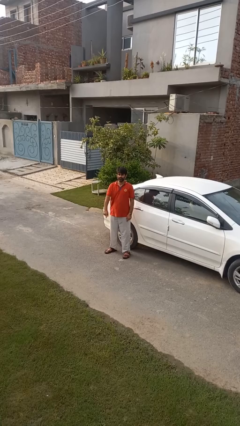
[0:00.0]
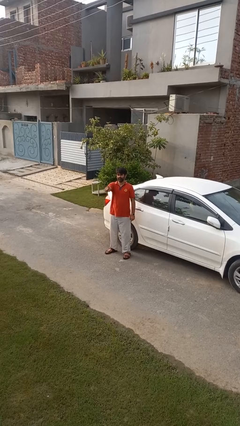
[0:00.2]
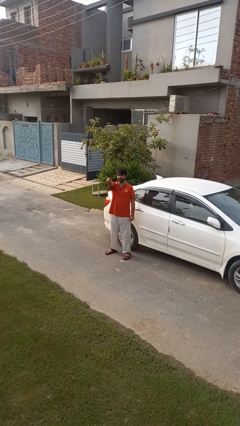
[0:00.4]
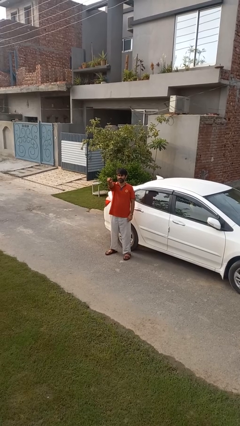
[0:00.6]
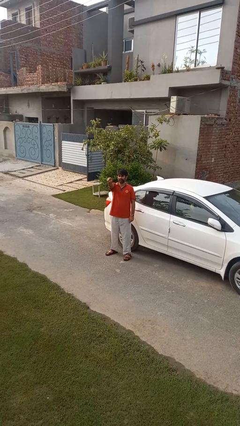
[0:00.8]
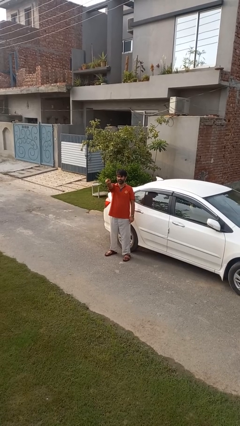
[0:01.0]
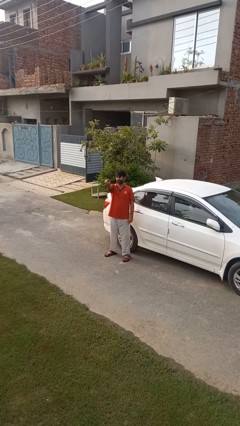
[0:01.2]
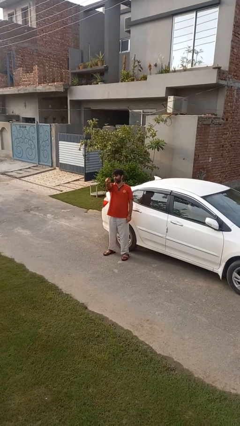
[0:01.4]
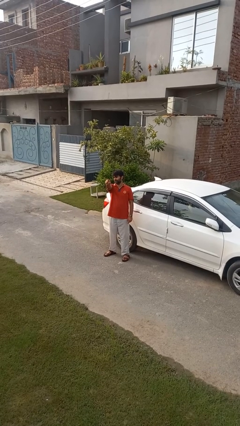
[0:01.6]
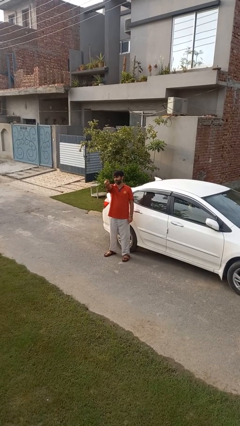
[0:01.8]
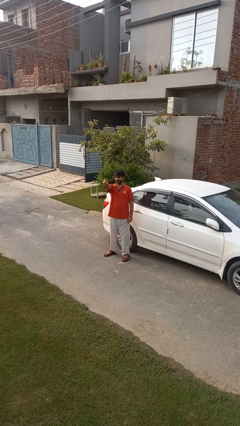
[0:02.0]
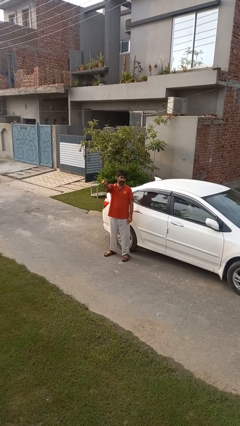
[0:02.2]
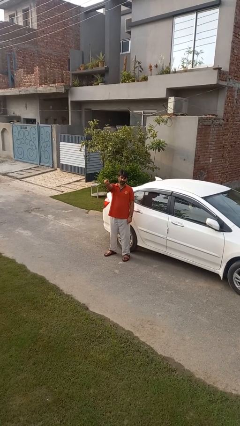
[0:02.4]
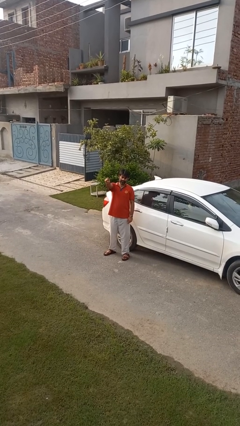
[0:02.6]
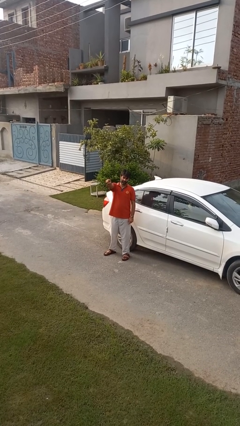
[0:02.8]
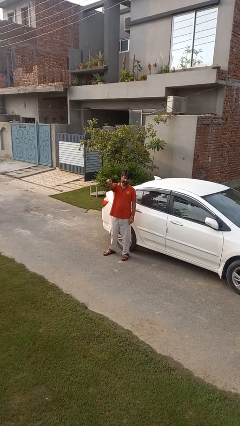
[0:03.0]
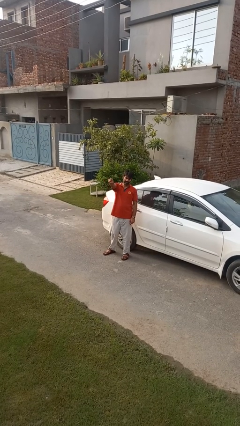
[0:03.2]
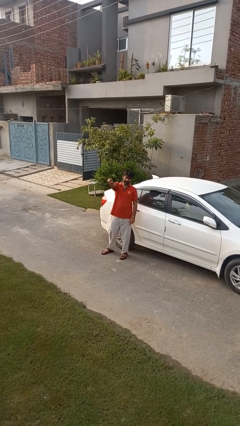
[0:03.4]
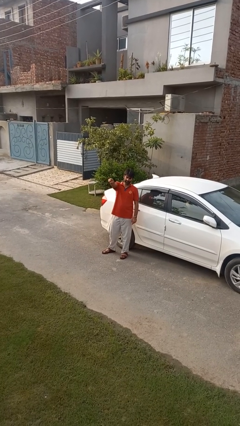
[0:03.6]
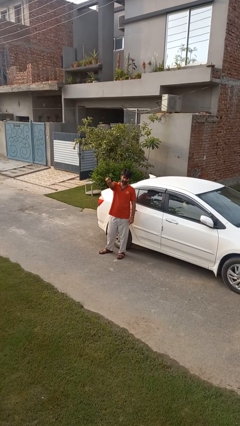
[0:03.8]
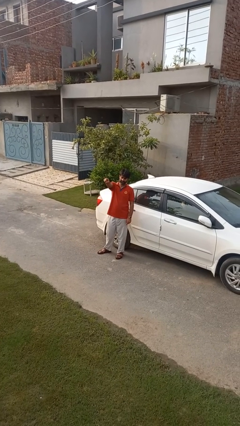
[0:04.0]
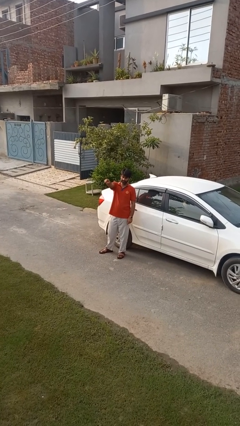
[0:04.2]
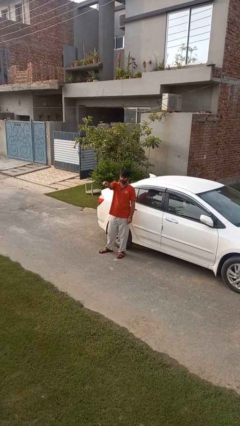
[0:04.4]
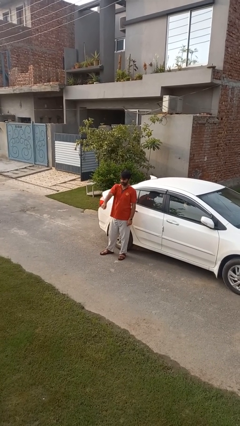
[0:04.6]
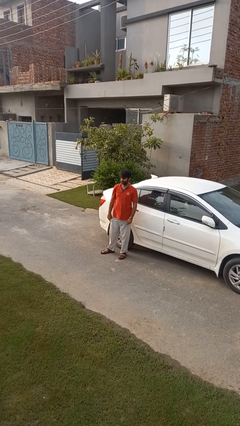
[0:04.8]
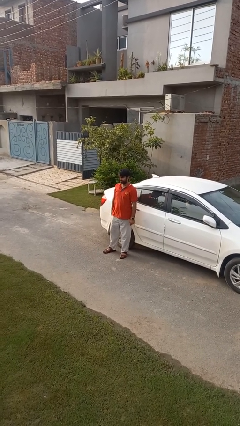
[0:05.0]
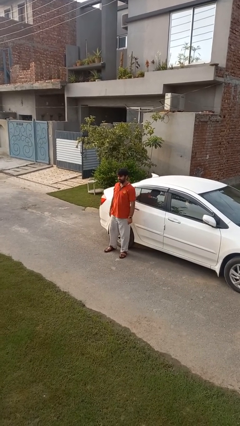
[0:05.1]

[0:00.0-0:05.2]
person points at person

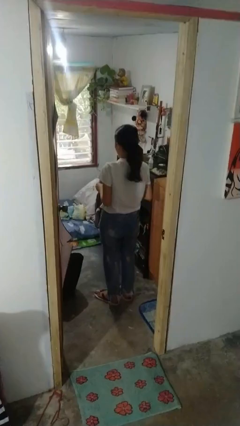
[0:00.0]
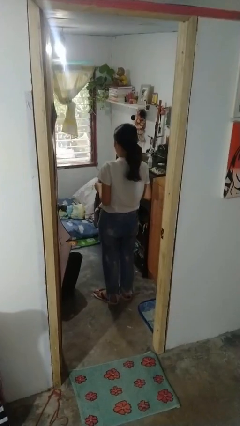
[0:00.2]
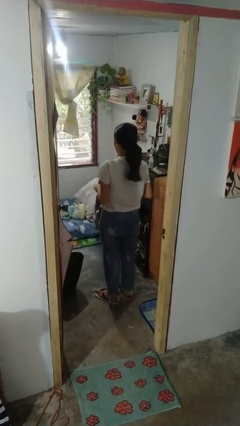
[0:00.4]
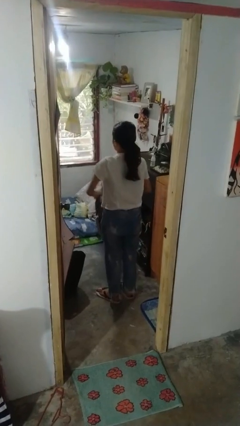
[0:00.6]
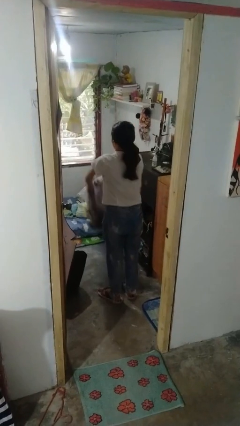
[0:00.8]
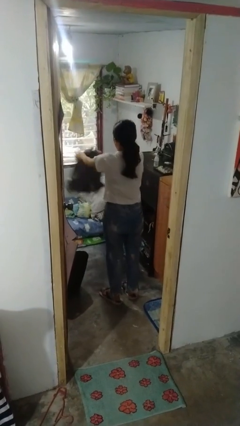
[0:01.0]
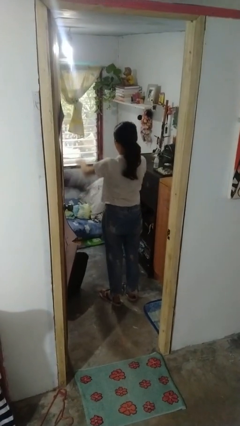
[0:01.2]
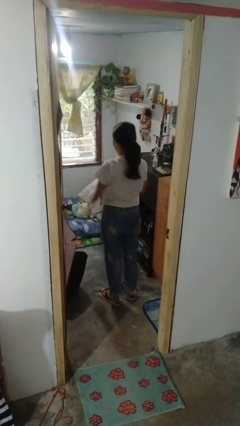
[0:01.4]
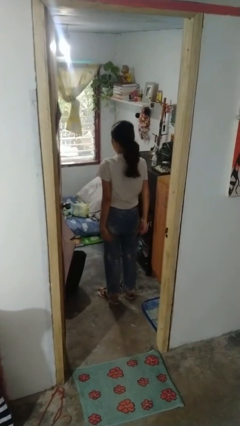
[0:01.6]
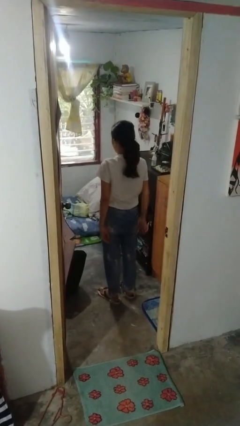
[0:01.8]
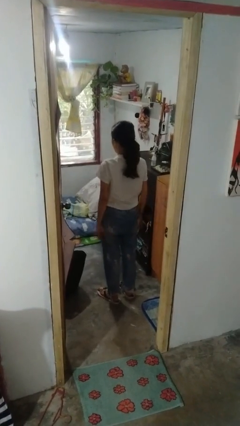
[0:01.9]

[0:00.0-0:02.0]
person throws object on bed

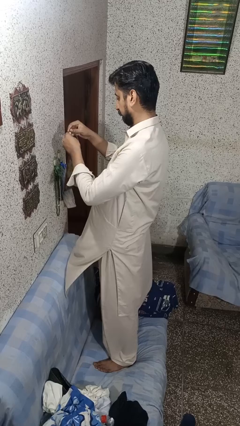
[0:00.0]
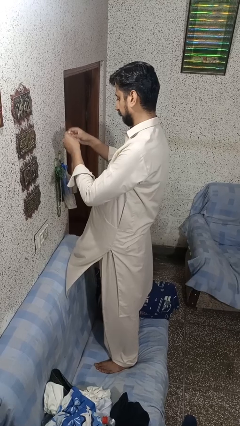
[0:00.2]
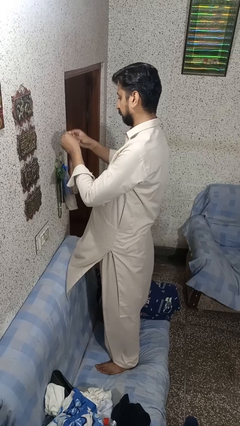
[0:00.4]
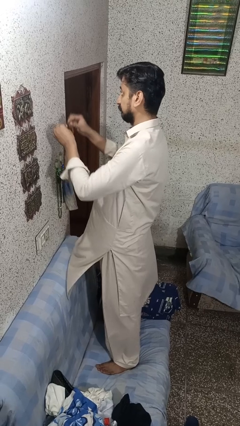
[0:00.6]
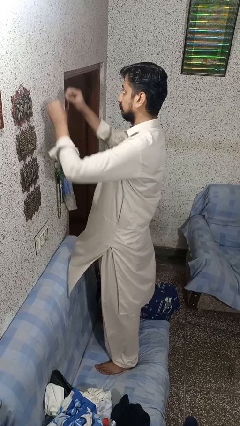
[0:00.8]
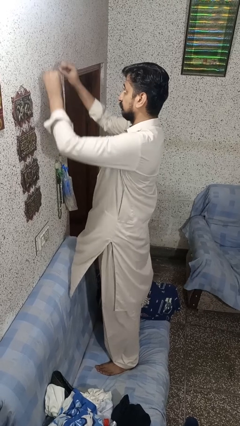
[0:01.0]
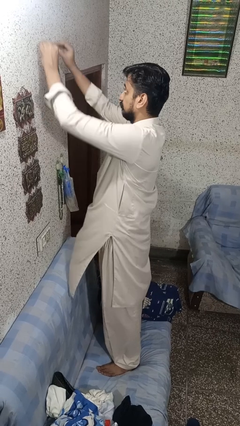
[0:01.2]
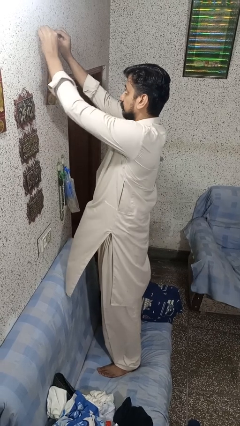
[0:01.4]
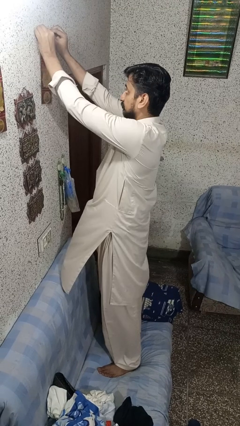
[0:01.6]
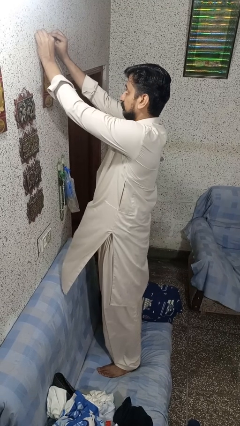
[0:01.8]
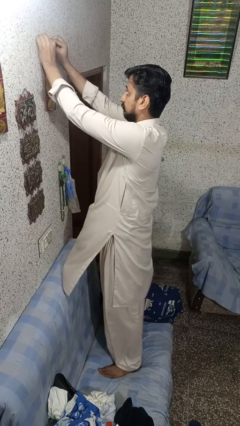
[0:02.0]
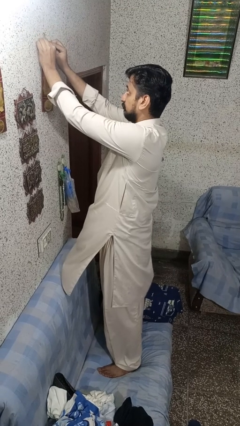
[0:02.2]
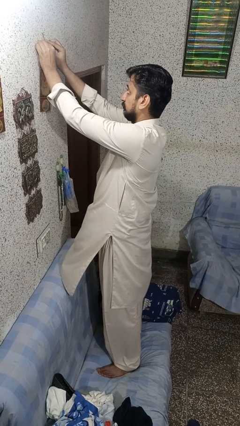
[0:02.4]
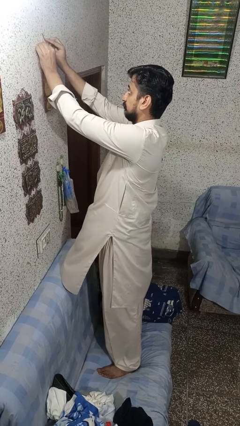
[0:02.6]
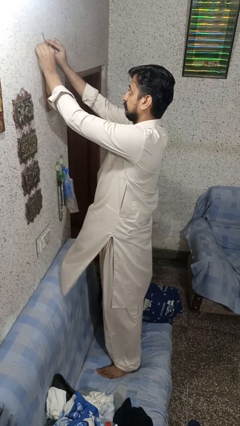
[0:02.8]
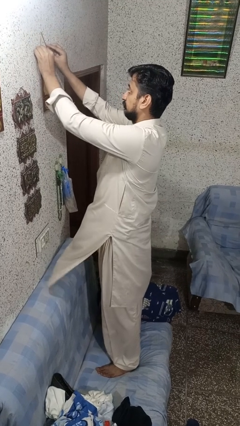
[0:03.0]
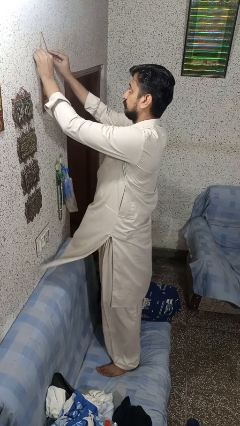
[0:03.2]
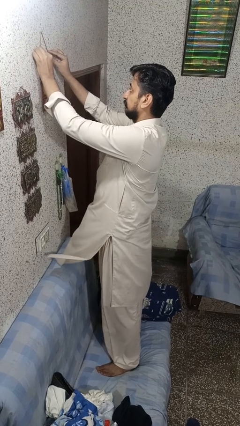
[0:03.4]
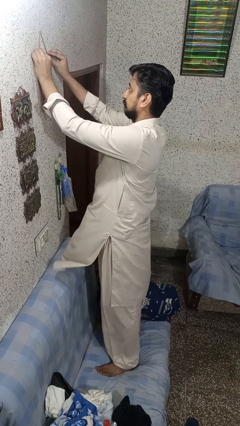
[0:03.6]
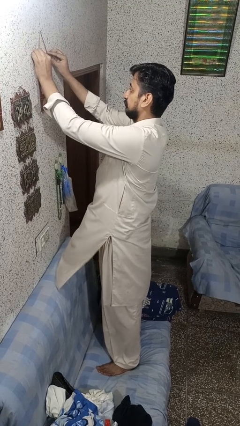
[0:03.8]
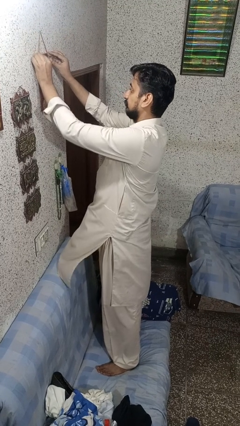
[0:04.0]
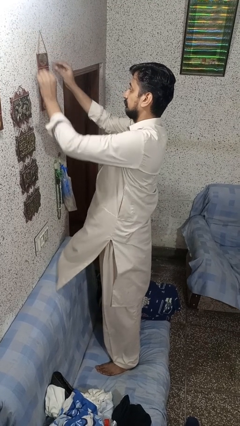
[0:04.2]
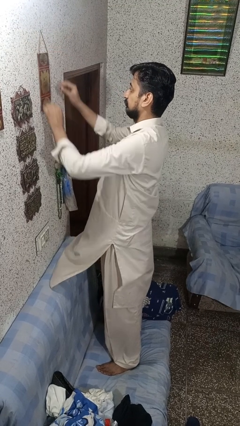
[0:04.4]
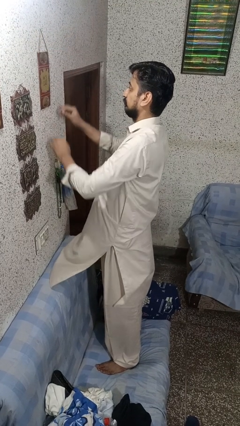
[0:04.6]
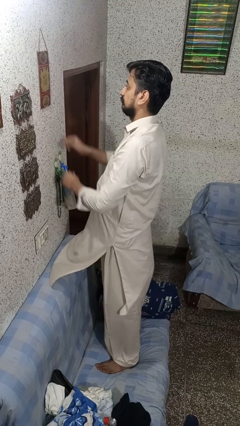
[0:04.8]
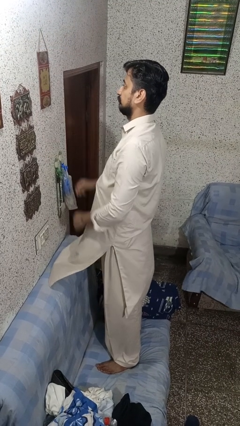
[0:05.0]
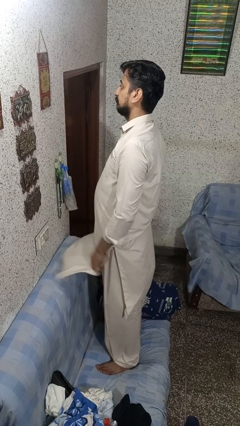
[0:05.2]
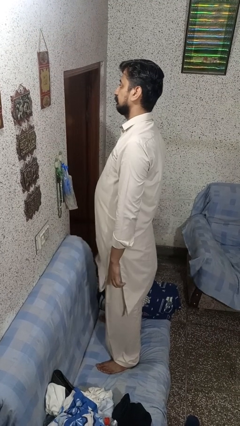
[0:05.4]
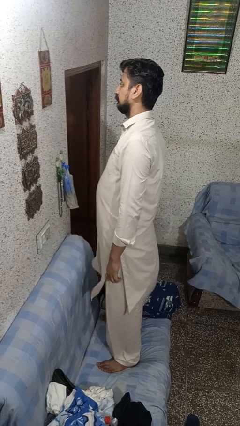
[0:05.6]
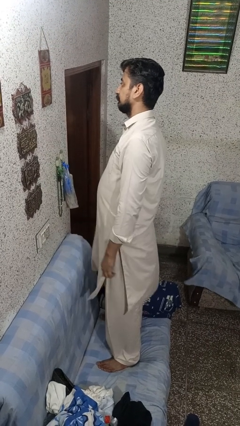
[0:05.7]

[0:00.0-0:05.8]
person puts up picture frame

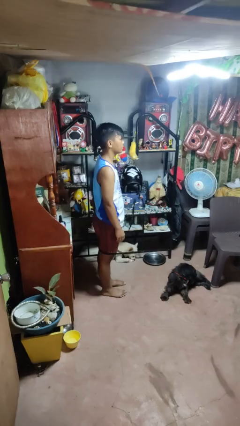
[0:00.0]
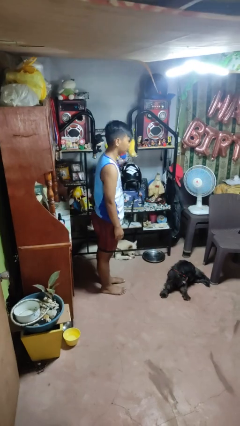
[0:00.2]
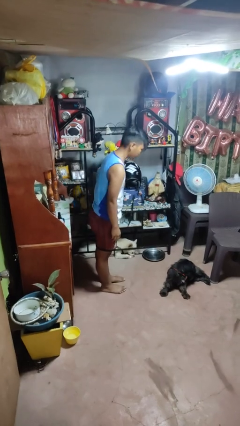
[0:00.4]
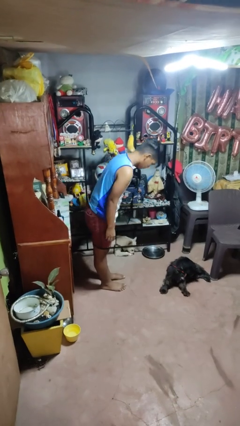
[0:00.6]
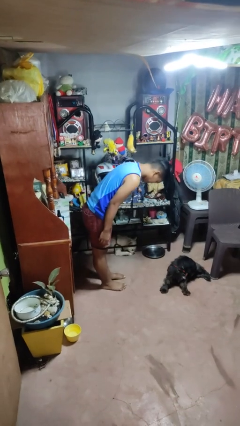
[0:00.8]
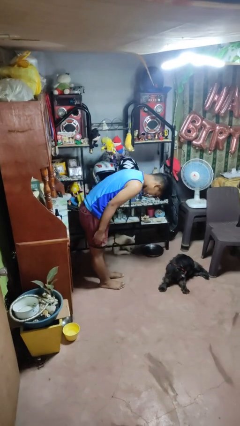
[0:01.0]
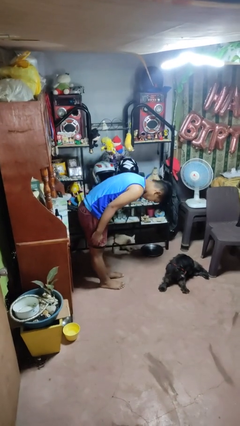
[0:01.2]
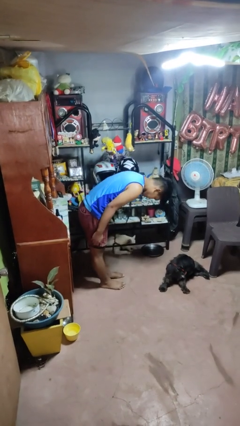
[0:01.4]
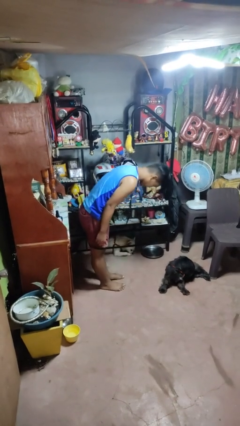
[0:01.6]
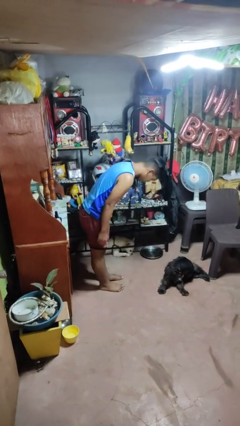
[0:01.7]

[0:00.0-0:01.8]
person bows

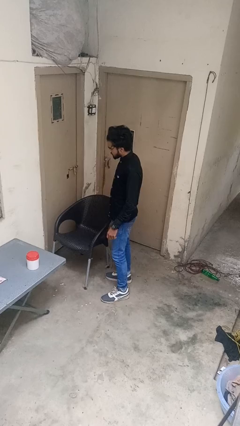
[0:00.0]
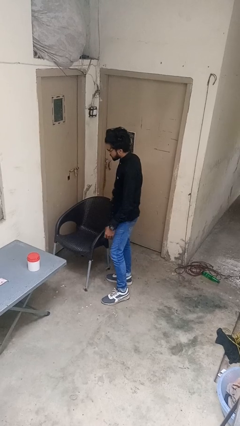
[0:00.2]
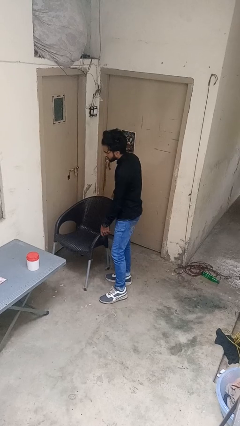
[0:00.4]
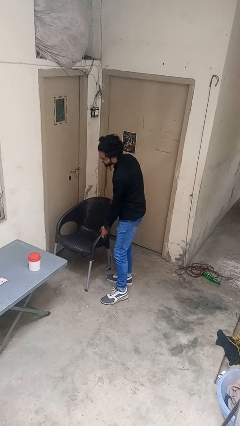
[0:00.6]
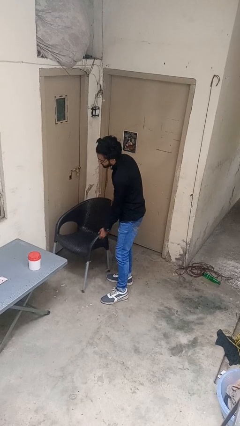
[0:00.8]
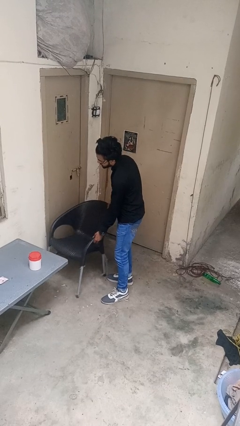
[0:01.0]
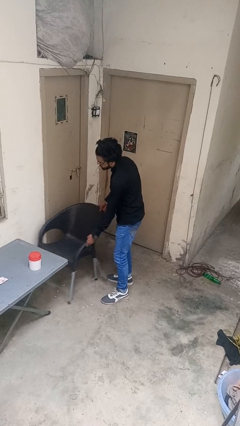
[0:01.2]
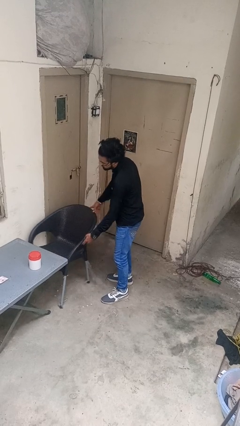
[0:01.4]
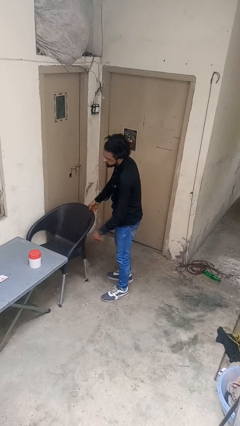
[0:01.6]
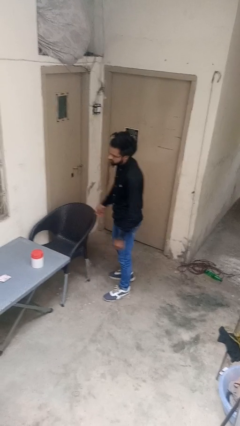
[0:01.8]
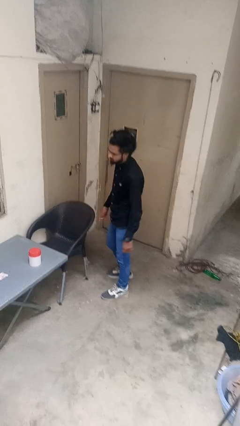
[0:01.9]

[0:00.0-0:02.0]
person pushes in chair

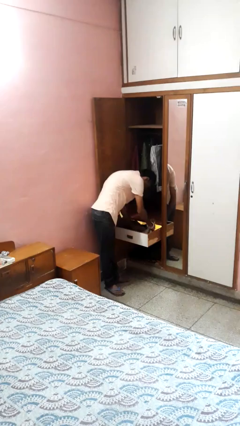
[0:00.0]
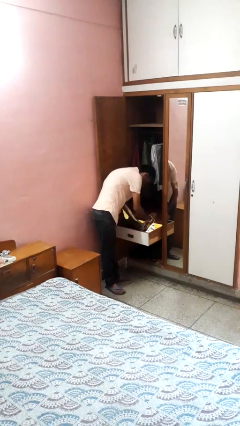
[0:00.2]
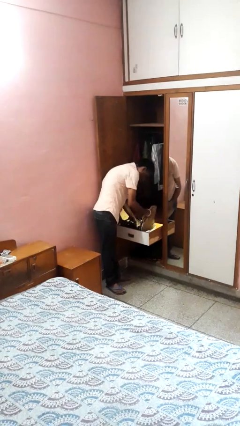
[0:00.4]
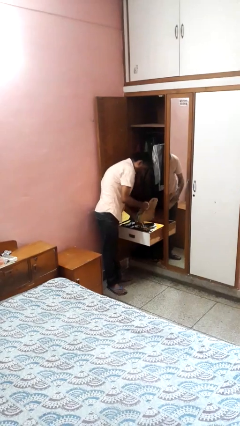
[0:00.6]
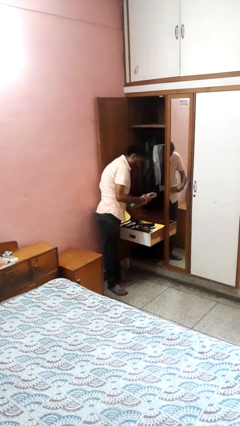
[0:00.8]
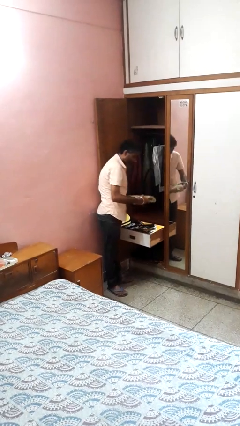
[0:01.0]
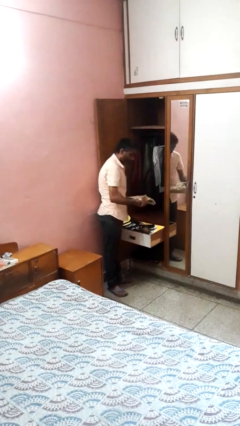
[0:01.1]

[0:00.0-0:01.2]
person takes clothes from dresser
